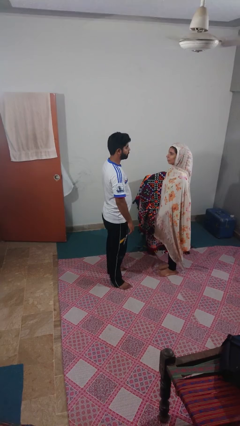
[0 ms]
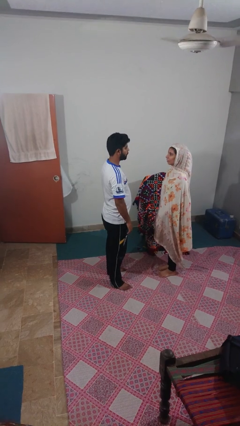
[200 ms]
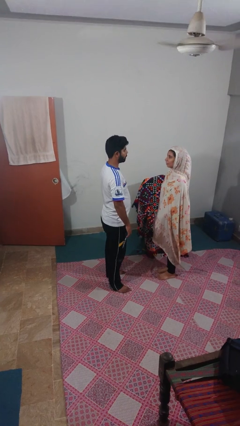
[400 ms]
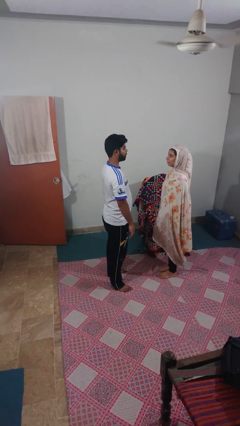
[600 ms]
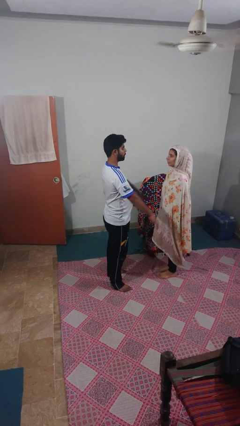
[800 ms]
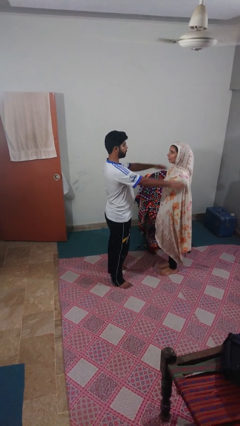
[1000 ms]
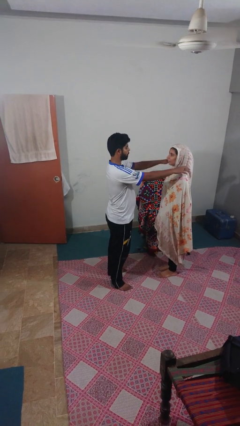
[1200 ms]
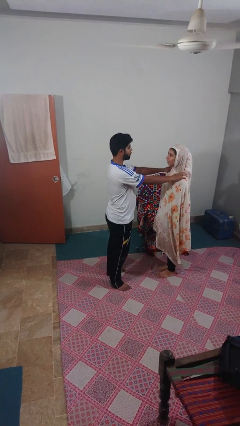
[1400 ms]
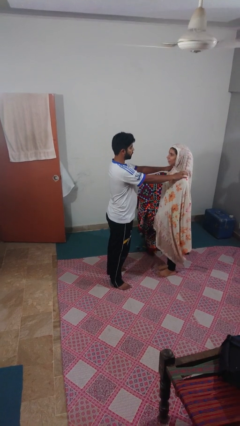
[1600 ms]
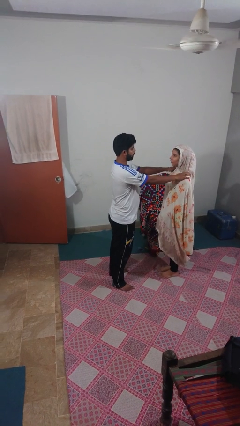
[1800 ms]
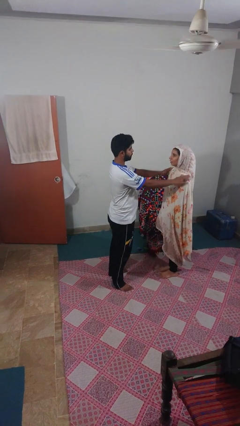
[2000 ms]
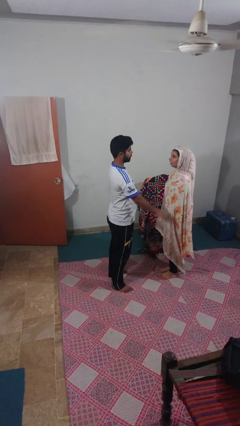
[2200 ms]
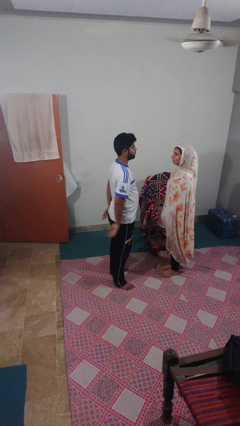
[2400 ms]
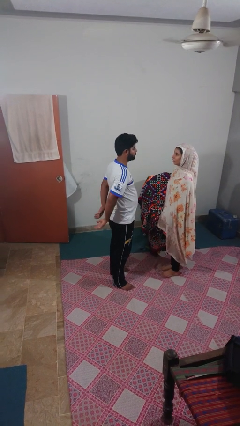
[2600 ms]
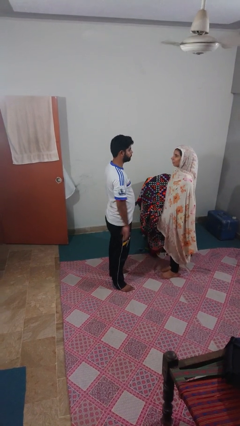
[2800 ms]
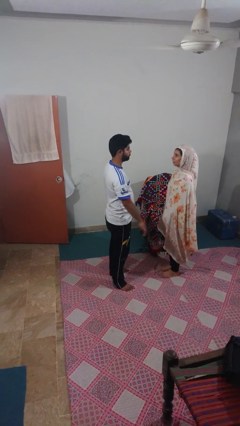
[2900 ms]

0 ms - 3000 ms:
person pounds shoulders of person

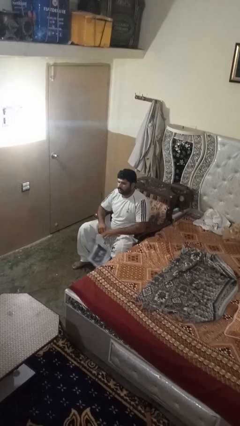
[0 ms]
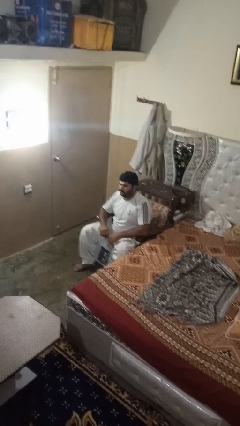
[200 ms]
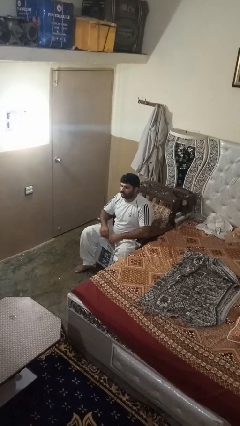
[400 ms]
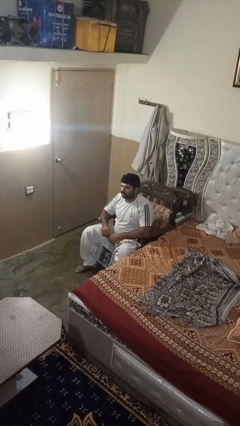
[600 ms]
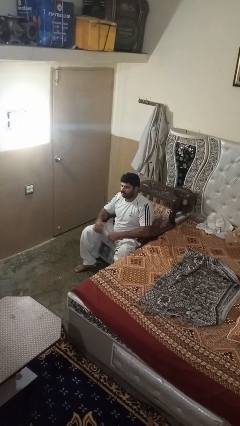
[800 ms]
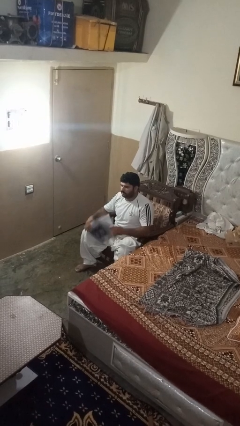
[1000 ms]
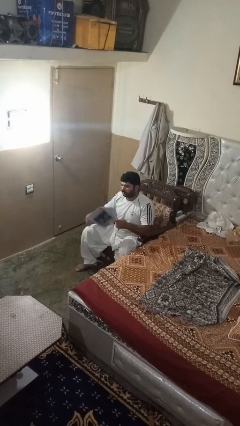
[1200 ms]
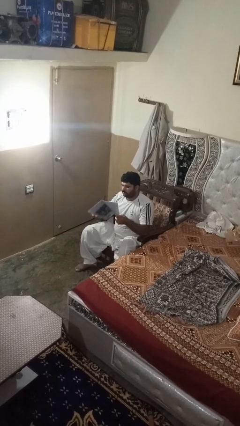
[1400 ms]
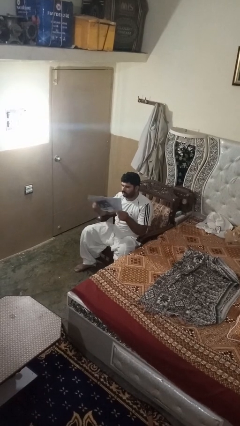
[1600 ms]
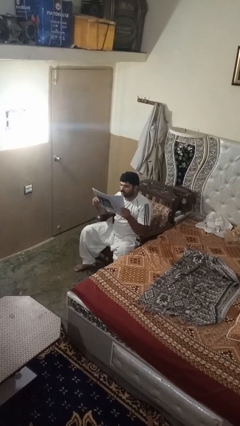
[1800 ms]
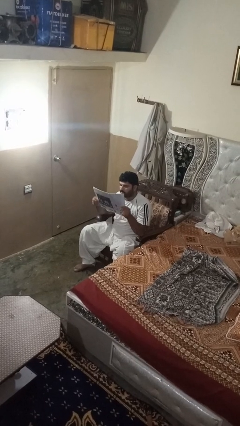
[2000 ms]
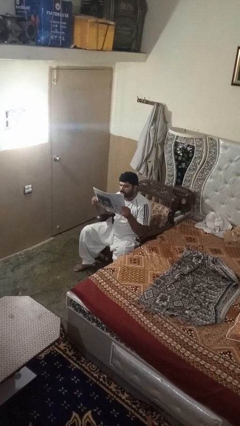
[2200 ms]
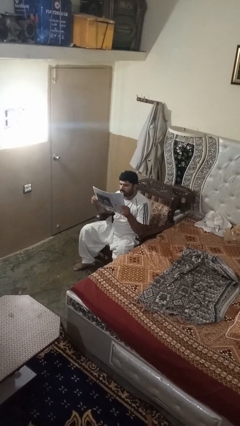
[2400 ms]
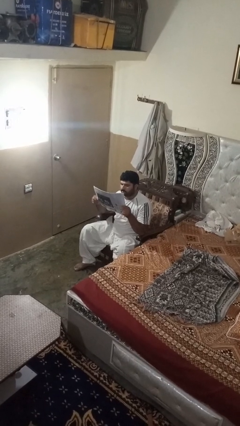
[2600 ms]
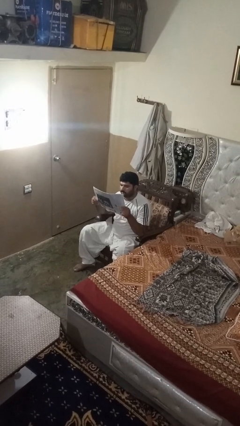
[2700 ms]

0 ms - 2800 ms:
person reads newspaper

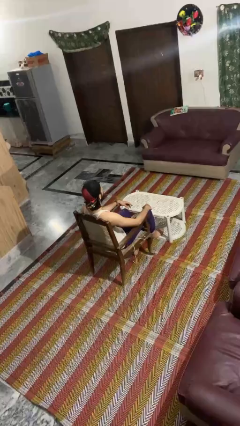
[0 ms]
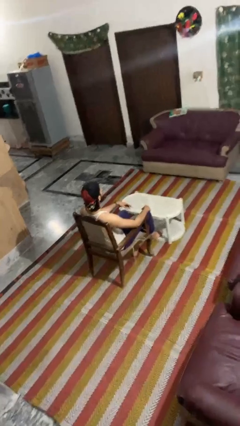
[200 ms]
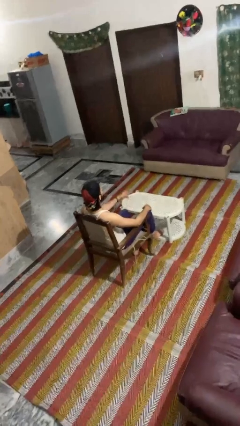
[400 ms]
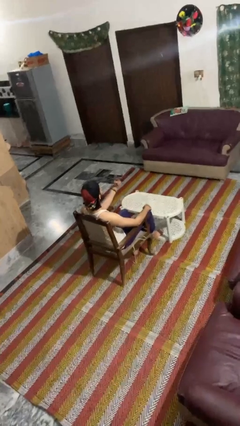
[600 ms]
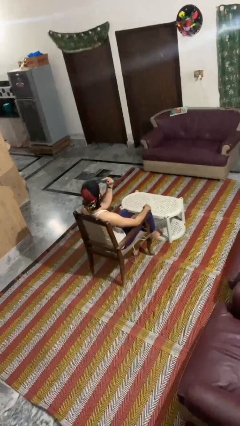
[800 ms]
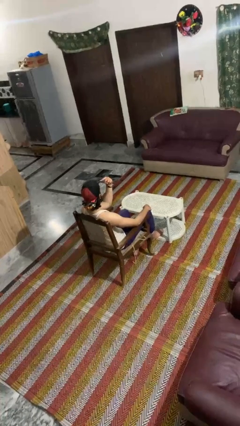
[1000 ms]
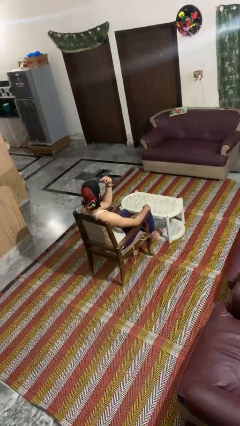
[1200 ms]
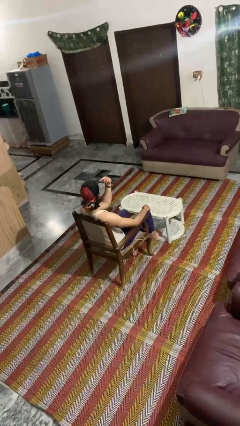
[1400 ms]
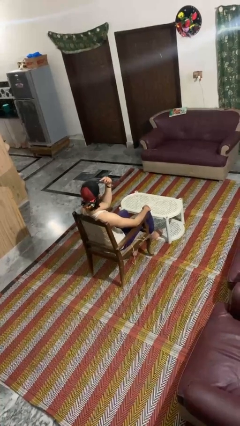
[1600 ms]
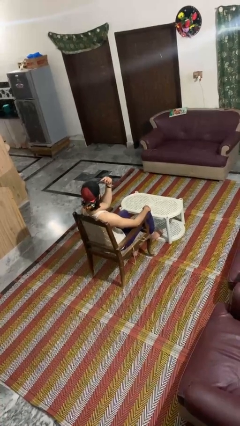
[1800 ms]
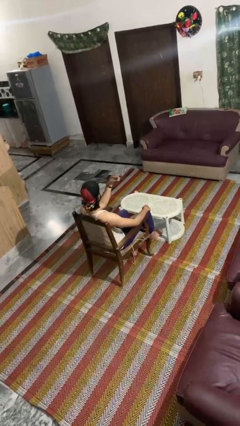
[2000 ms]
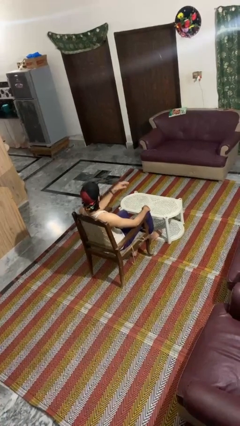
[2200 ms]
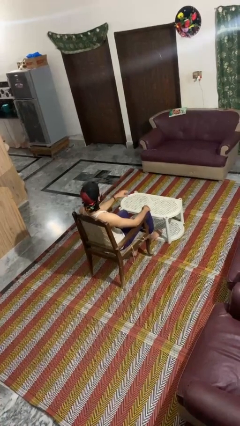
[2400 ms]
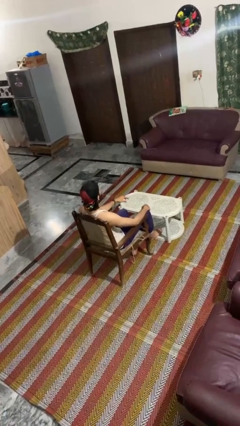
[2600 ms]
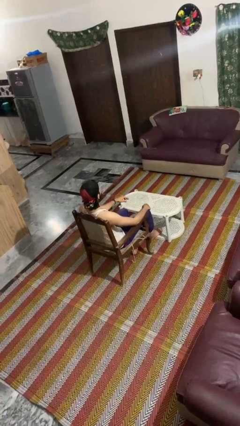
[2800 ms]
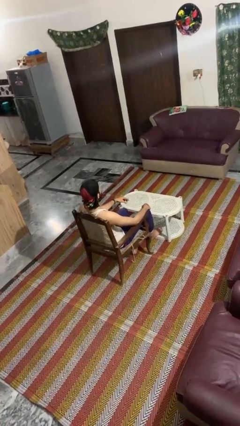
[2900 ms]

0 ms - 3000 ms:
person gestures watch closely

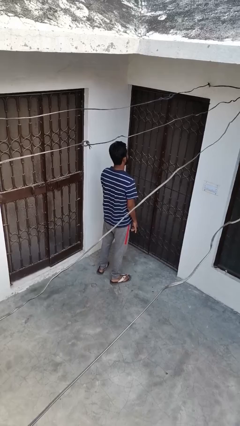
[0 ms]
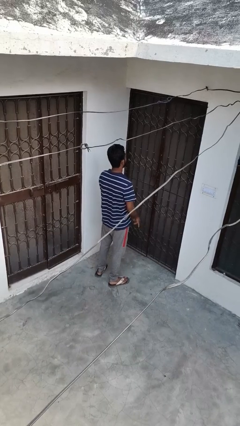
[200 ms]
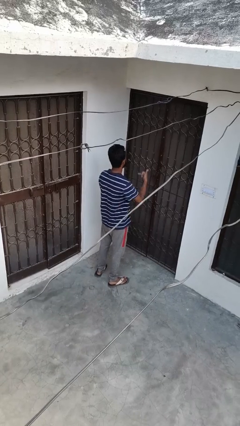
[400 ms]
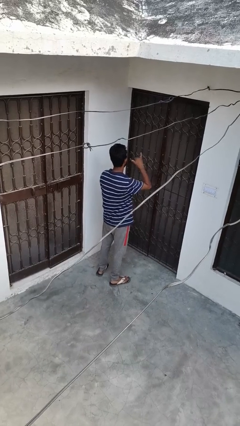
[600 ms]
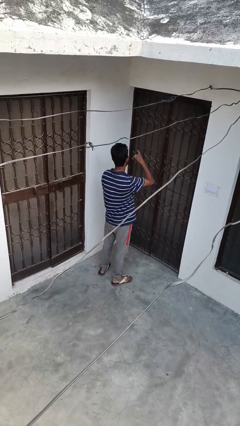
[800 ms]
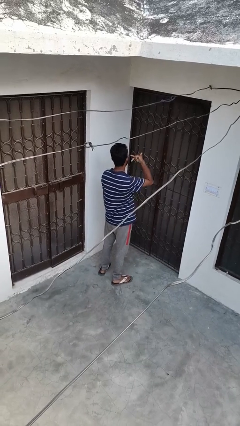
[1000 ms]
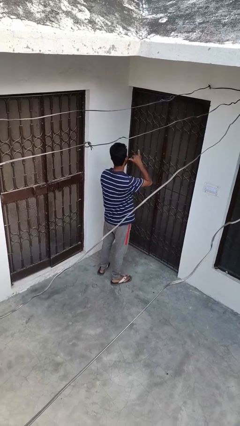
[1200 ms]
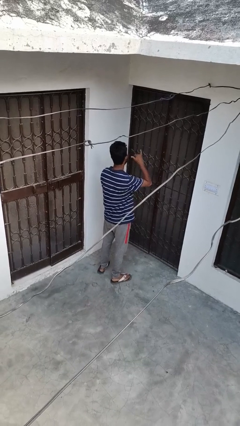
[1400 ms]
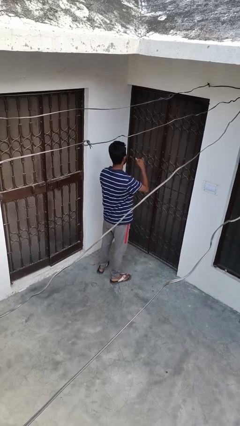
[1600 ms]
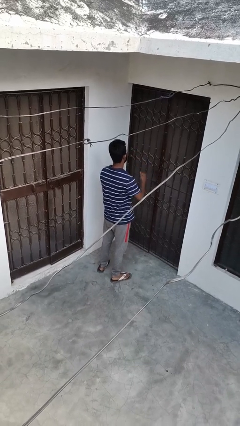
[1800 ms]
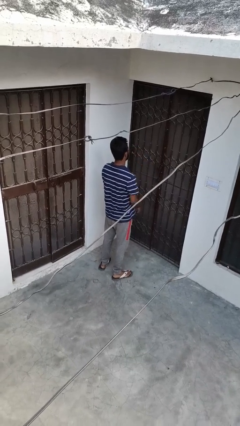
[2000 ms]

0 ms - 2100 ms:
person gestures hang loose

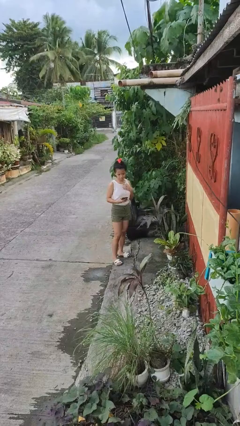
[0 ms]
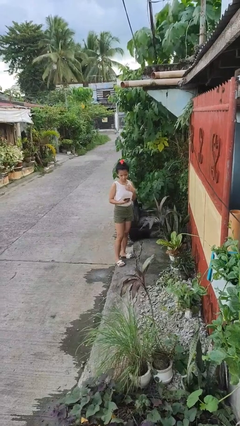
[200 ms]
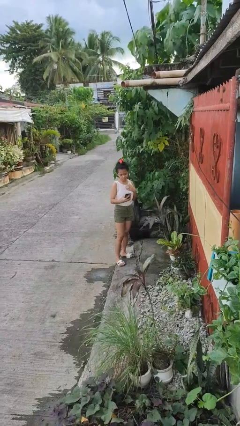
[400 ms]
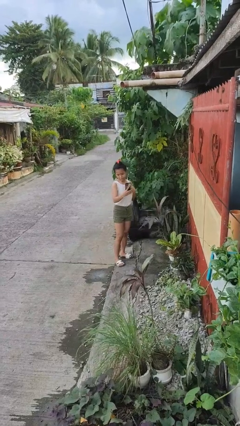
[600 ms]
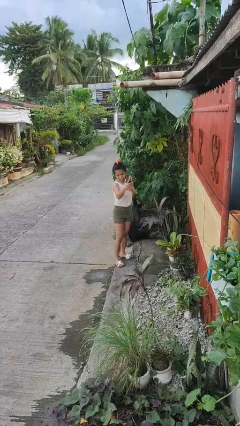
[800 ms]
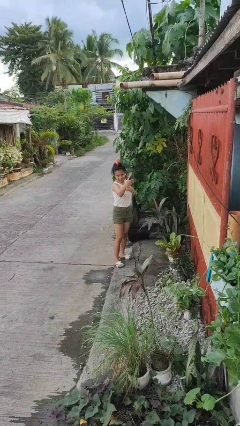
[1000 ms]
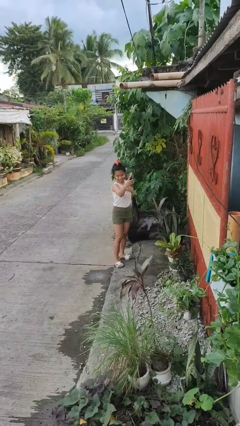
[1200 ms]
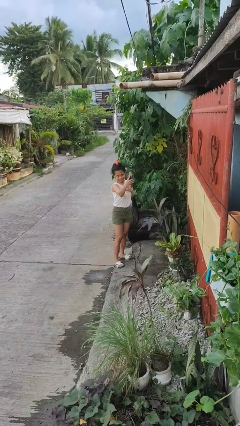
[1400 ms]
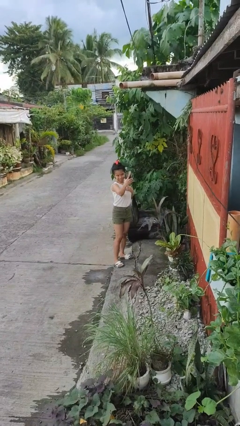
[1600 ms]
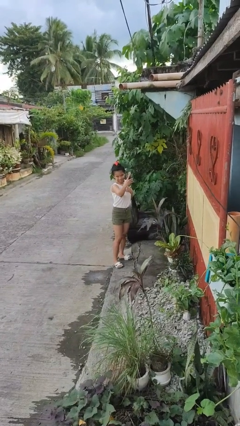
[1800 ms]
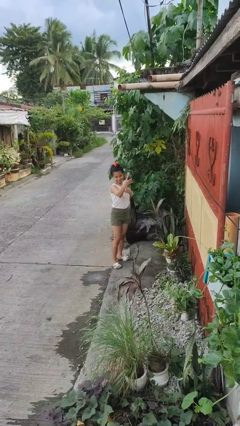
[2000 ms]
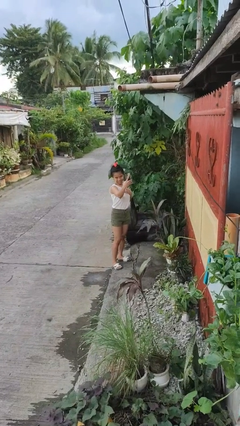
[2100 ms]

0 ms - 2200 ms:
person takes selfie

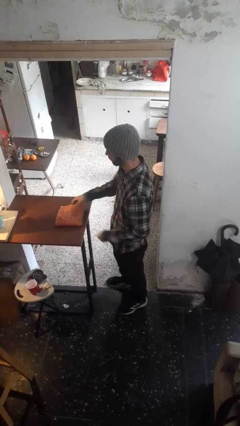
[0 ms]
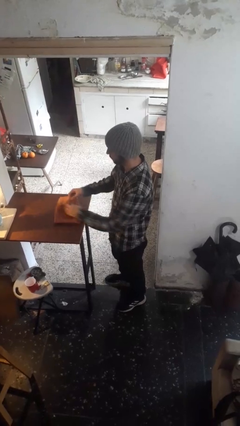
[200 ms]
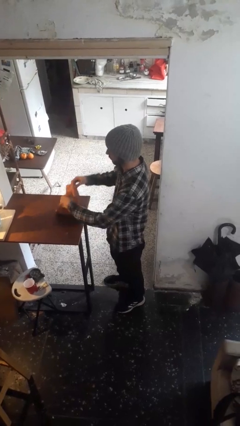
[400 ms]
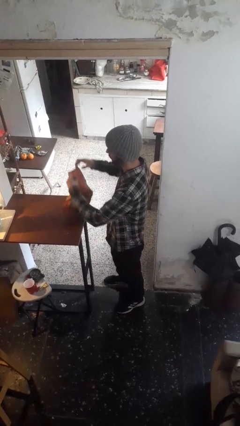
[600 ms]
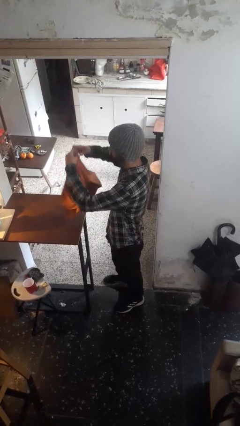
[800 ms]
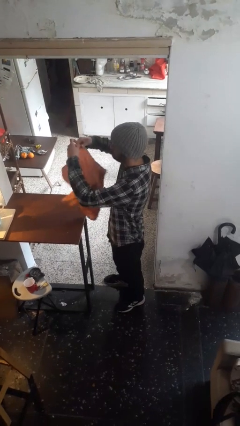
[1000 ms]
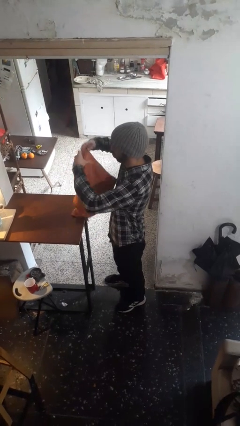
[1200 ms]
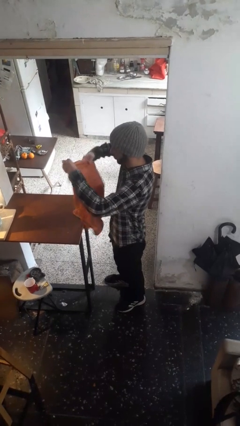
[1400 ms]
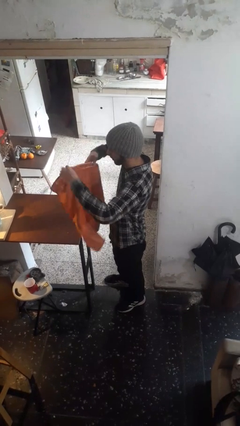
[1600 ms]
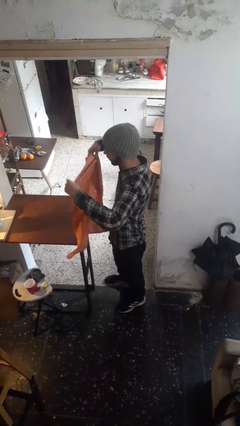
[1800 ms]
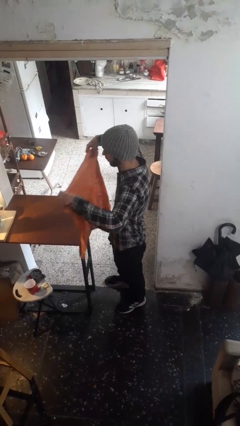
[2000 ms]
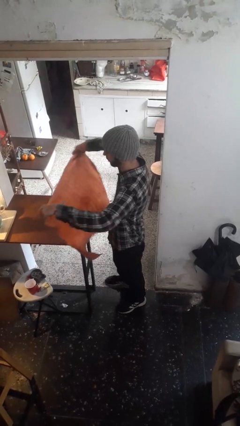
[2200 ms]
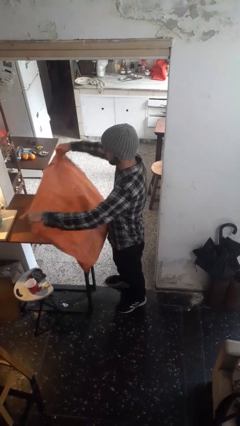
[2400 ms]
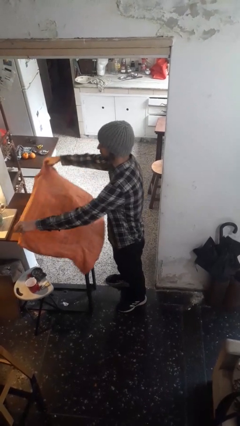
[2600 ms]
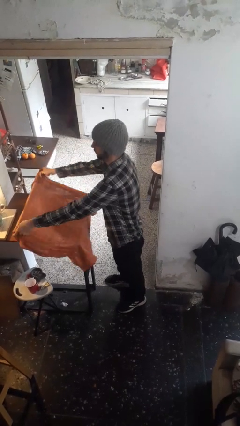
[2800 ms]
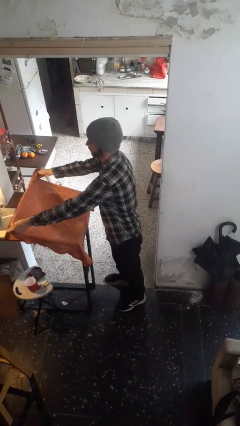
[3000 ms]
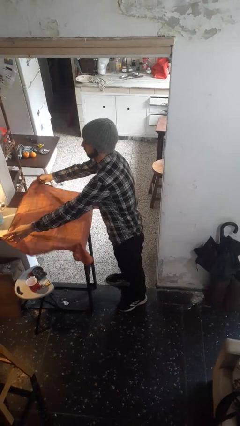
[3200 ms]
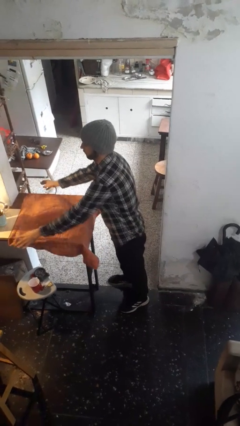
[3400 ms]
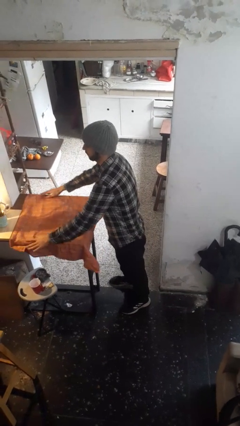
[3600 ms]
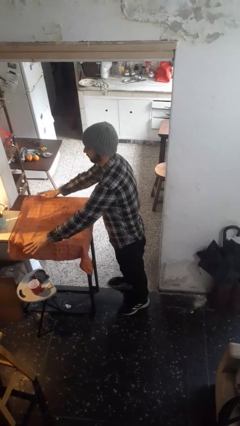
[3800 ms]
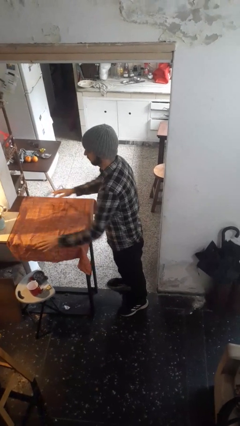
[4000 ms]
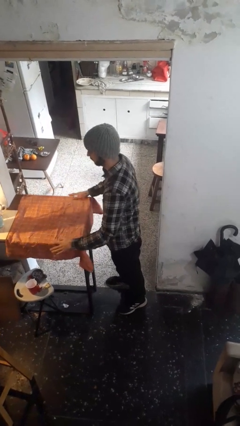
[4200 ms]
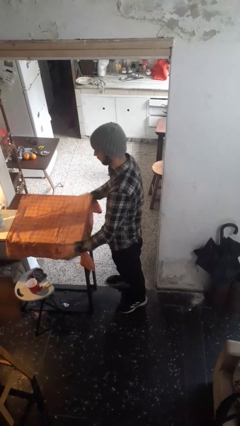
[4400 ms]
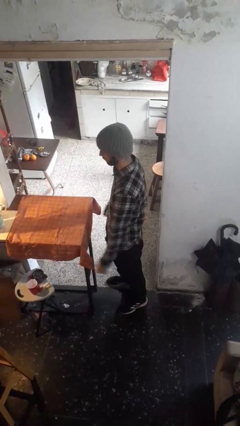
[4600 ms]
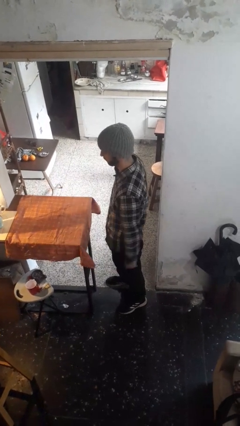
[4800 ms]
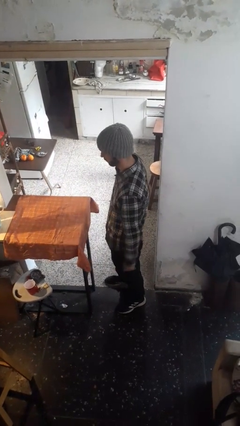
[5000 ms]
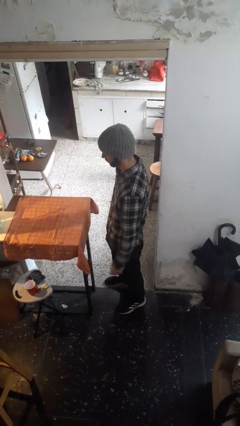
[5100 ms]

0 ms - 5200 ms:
person spreads tablecloth
